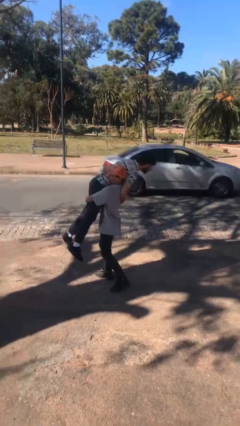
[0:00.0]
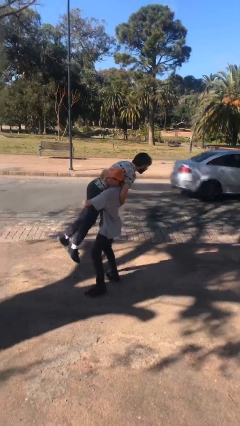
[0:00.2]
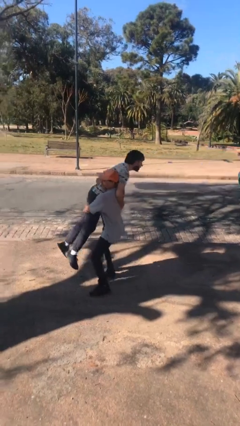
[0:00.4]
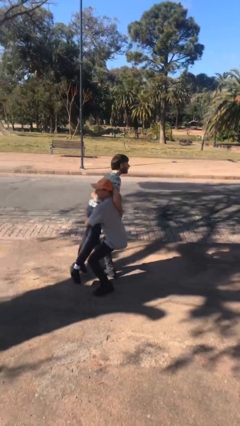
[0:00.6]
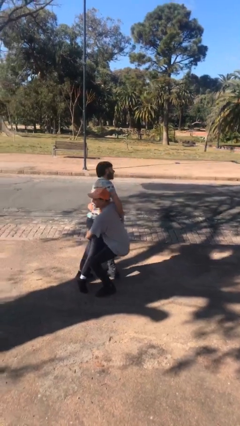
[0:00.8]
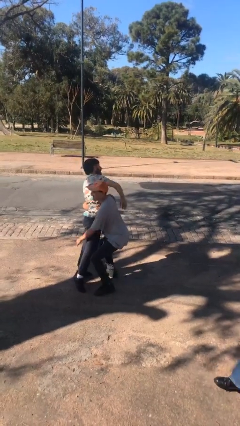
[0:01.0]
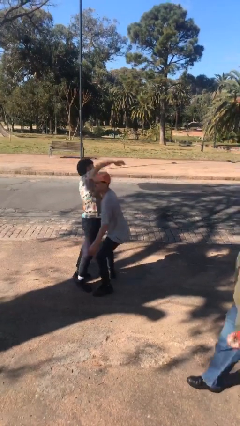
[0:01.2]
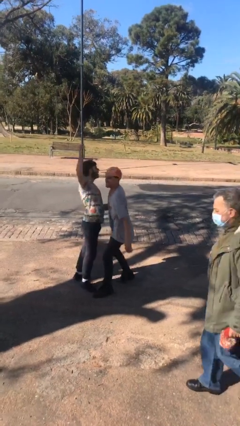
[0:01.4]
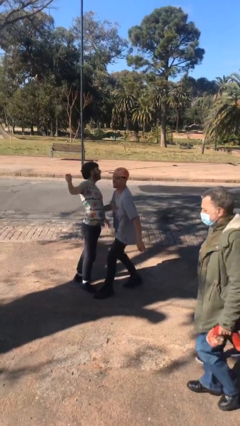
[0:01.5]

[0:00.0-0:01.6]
person puts down person

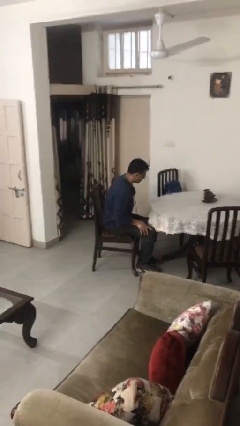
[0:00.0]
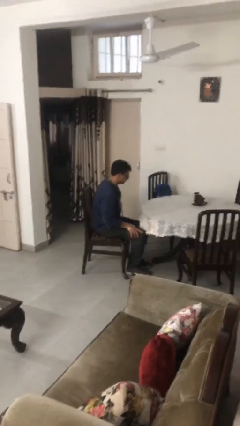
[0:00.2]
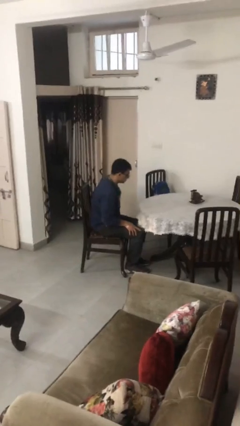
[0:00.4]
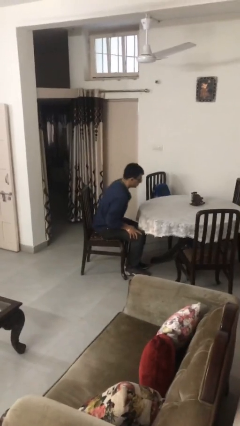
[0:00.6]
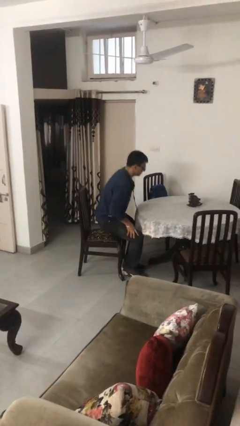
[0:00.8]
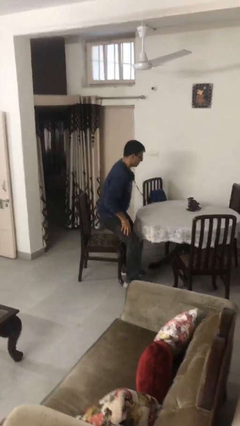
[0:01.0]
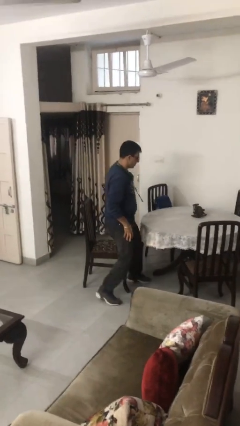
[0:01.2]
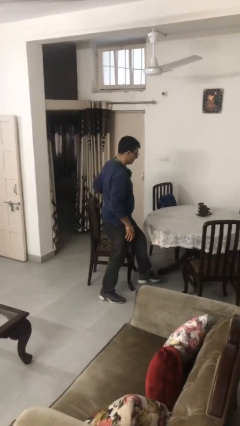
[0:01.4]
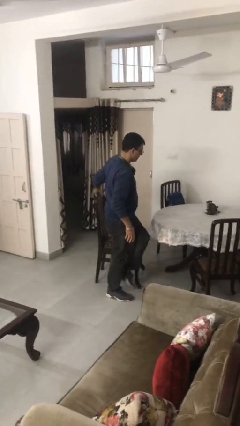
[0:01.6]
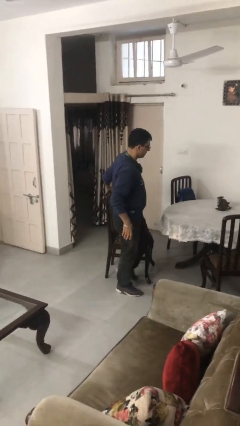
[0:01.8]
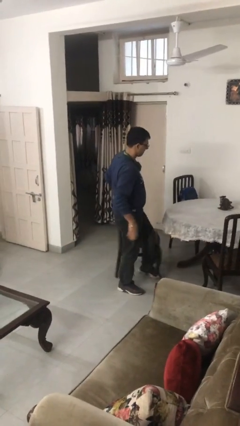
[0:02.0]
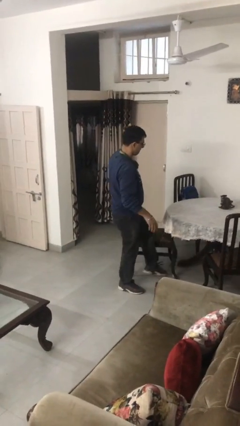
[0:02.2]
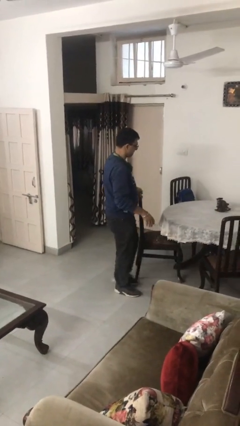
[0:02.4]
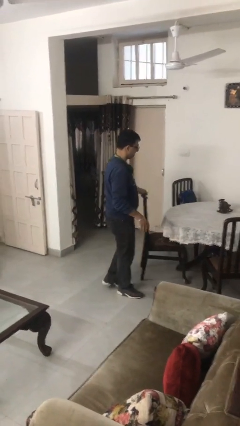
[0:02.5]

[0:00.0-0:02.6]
person stands up

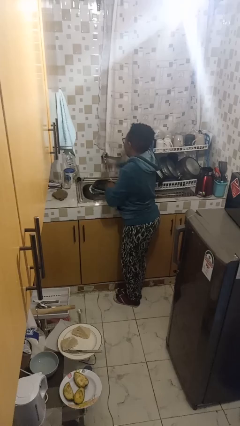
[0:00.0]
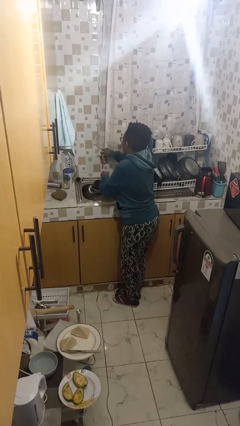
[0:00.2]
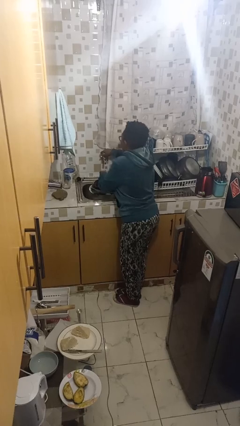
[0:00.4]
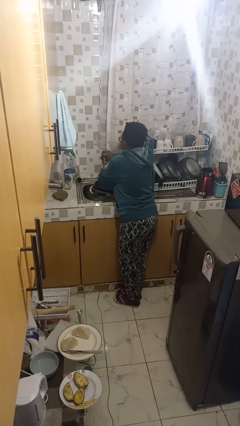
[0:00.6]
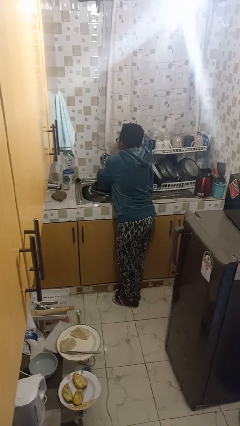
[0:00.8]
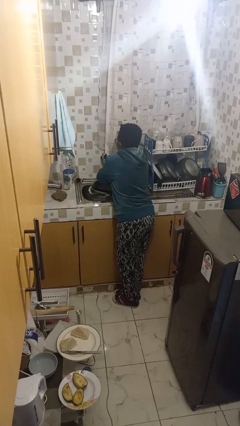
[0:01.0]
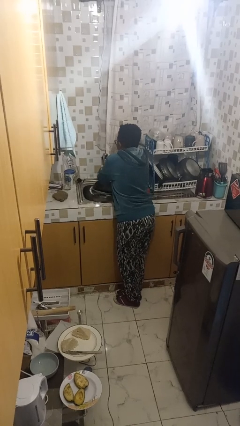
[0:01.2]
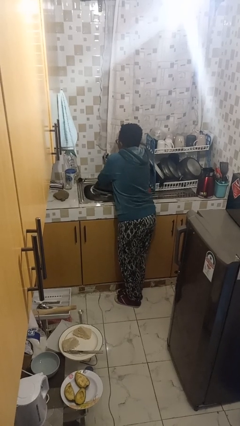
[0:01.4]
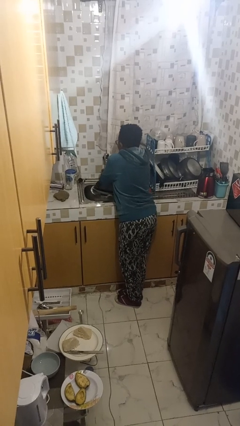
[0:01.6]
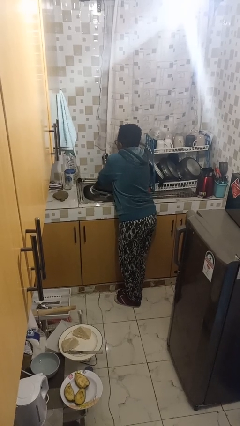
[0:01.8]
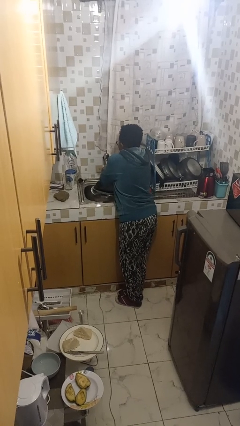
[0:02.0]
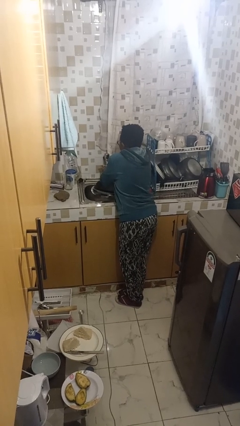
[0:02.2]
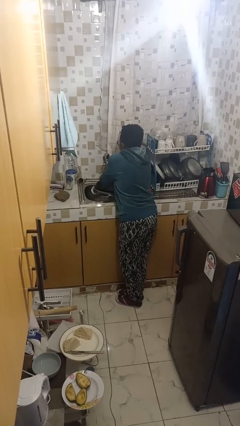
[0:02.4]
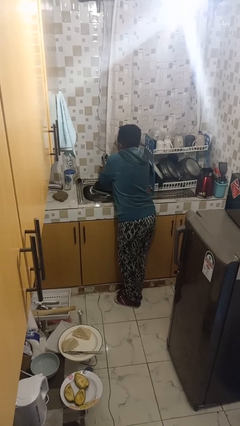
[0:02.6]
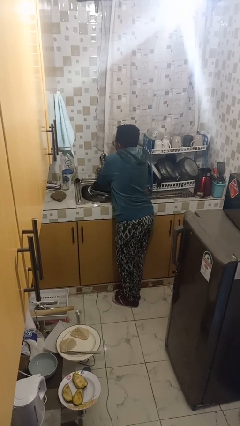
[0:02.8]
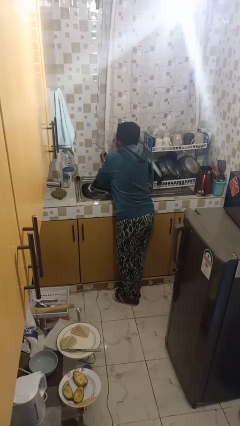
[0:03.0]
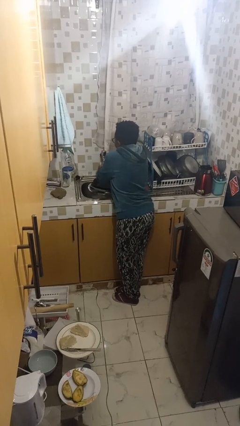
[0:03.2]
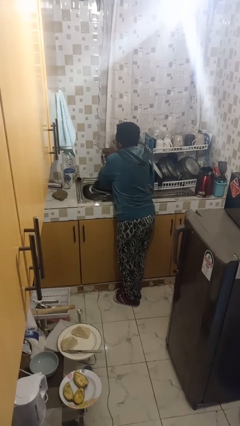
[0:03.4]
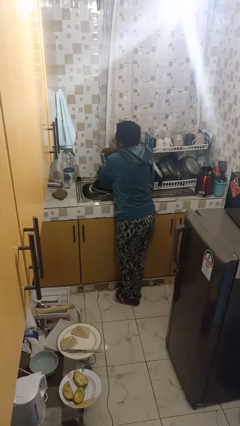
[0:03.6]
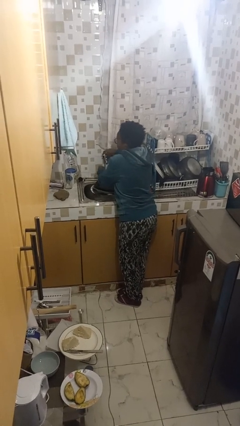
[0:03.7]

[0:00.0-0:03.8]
person washes hands

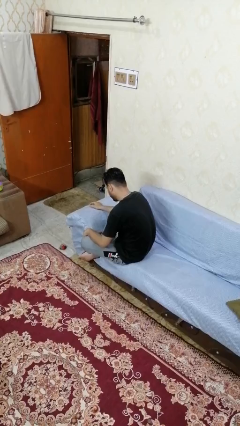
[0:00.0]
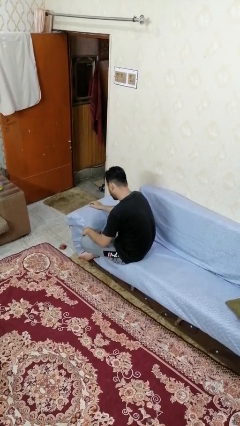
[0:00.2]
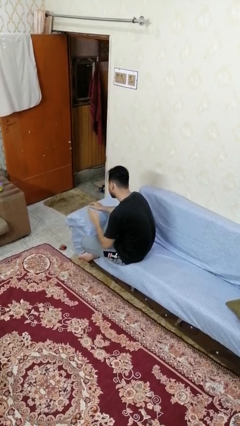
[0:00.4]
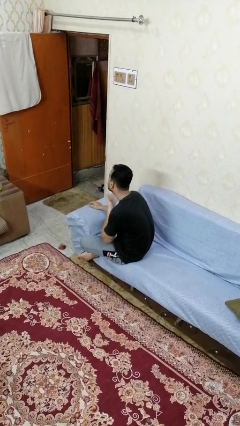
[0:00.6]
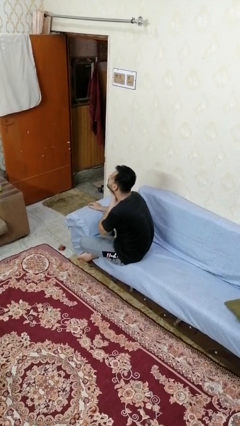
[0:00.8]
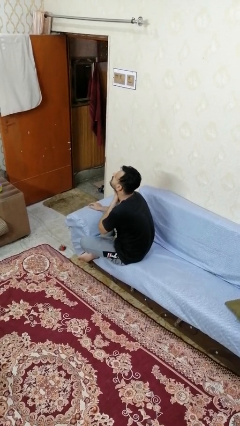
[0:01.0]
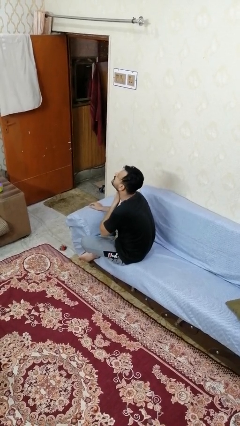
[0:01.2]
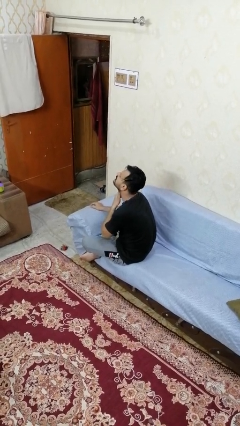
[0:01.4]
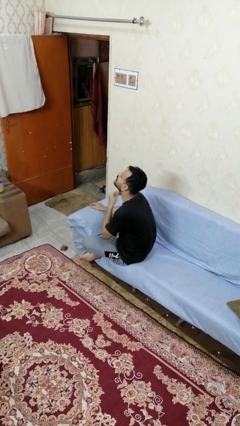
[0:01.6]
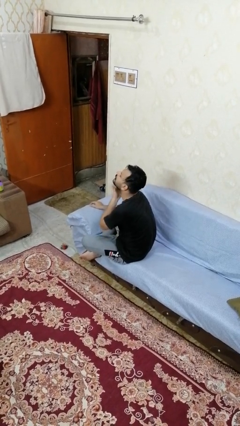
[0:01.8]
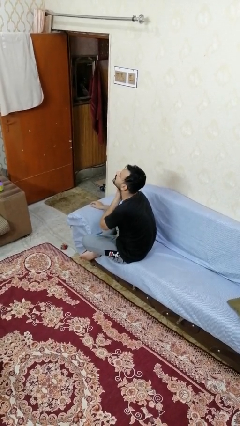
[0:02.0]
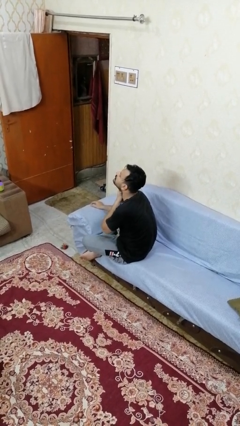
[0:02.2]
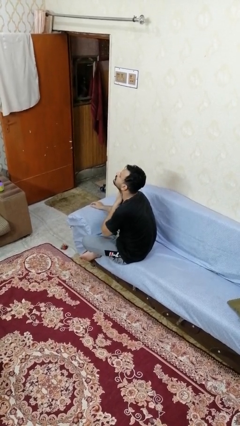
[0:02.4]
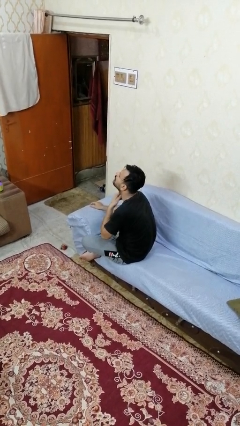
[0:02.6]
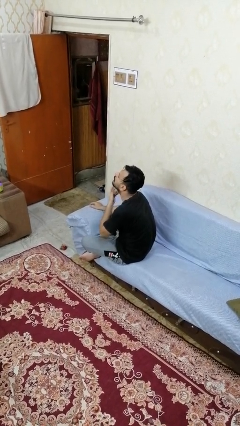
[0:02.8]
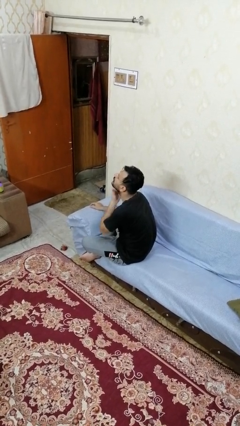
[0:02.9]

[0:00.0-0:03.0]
person rubs neck

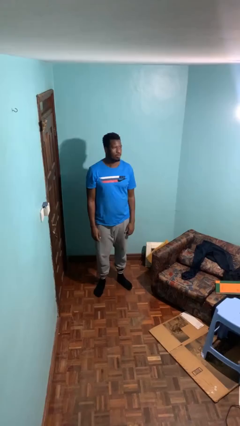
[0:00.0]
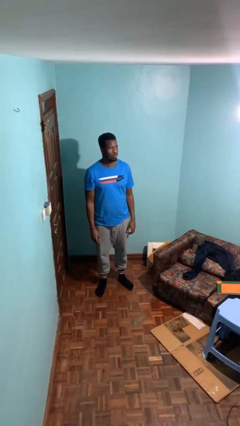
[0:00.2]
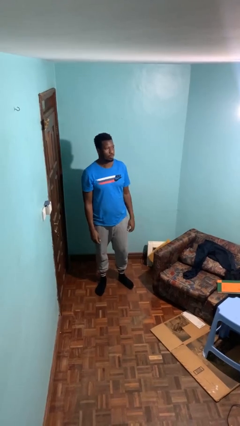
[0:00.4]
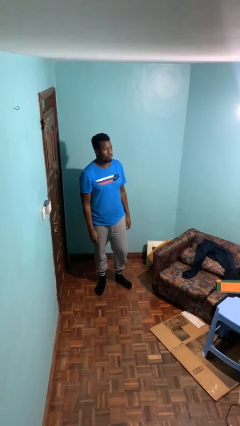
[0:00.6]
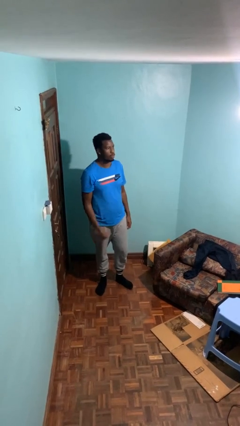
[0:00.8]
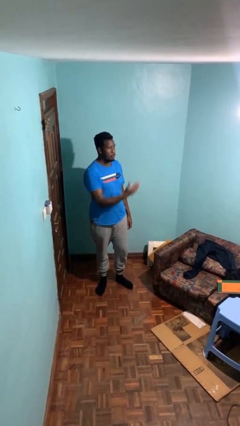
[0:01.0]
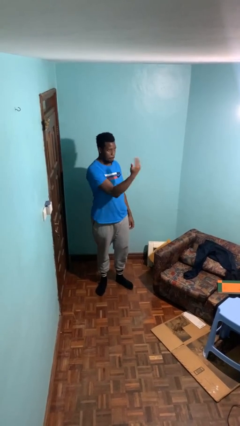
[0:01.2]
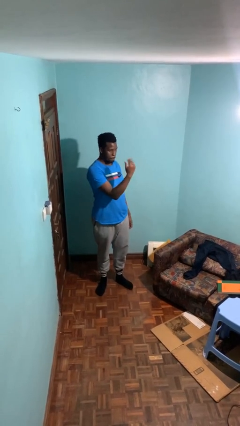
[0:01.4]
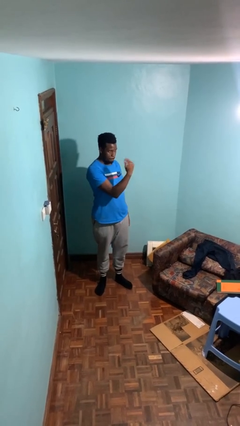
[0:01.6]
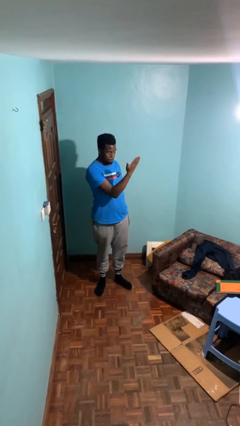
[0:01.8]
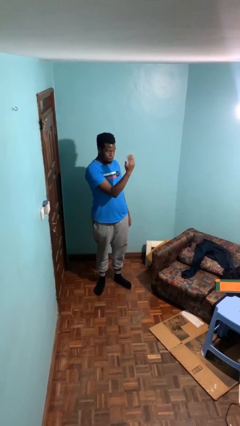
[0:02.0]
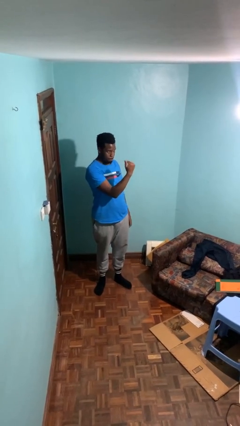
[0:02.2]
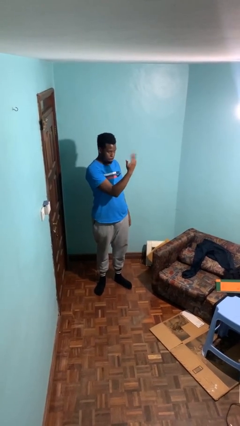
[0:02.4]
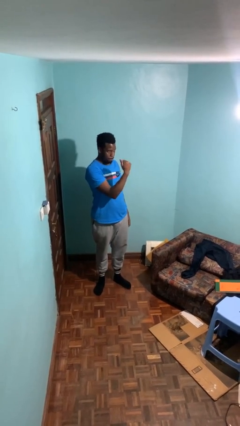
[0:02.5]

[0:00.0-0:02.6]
person gestures come here

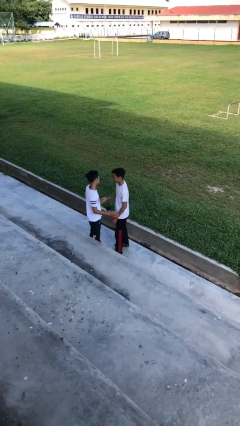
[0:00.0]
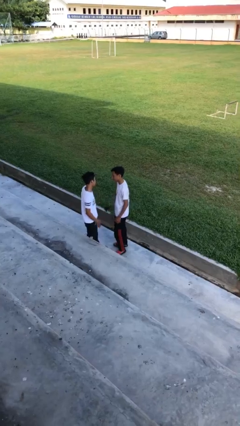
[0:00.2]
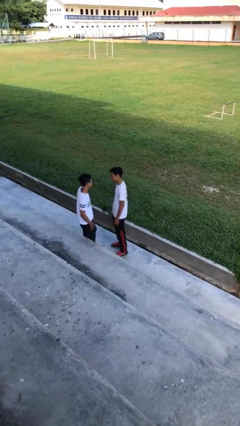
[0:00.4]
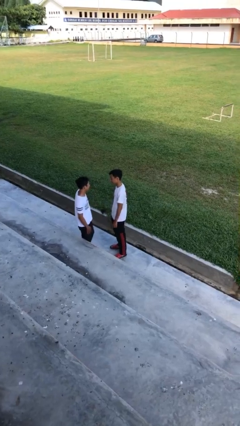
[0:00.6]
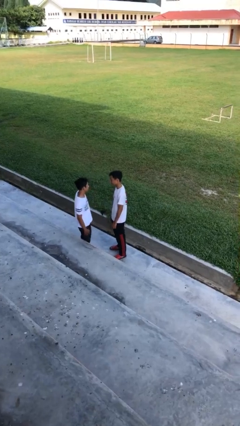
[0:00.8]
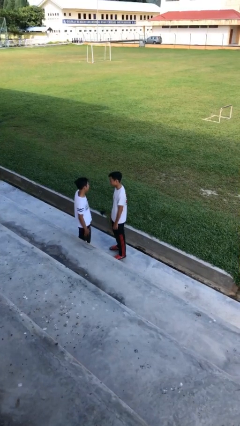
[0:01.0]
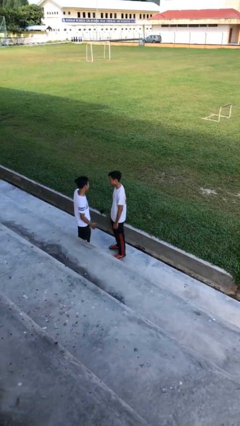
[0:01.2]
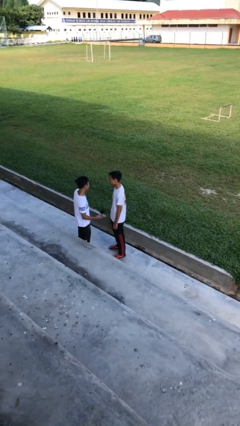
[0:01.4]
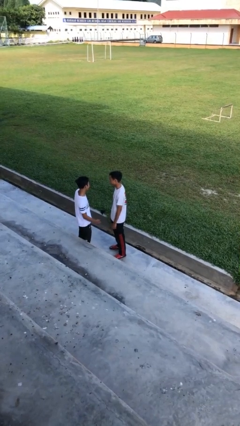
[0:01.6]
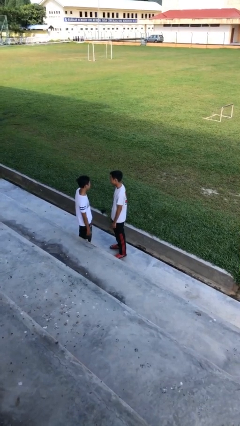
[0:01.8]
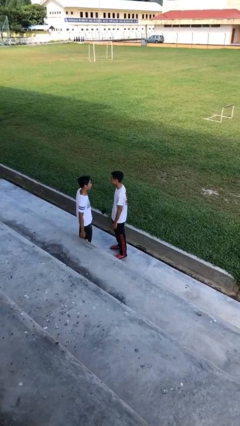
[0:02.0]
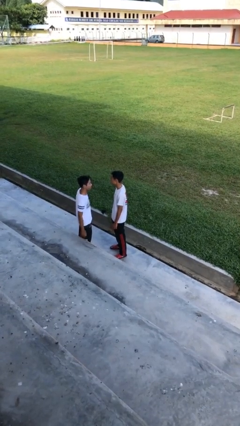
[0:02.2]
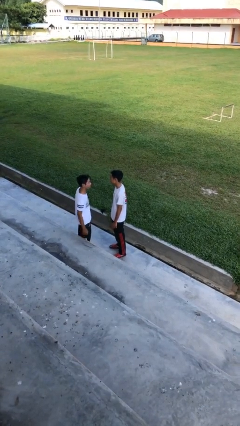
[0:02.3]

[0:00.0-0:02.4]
person talks to person

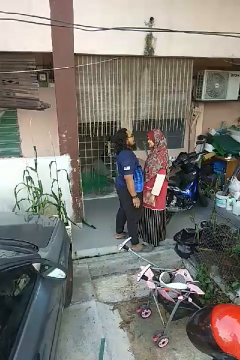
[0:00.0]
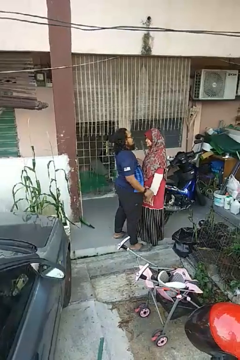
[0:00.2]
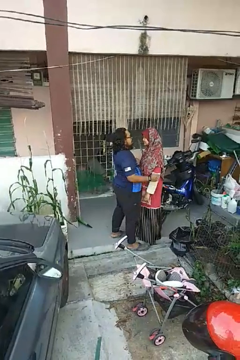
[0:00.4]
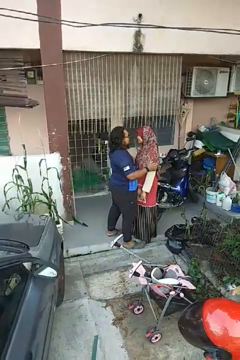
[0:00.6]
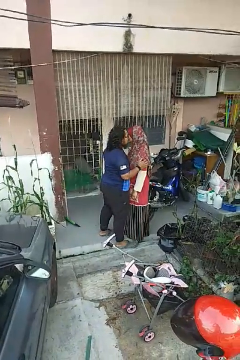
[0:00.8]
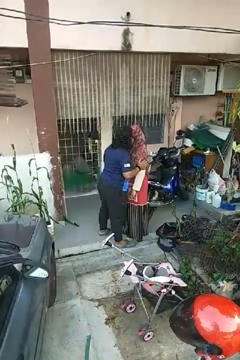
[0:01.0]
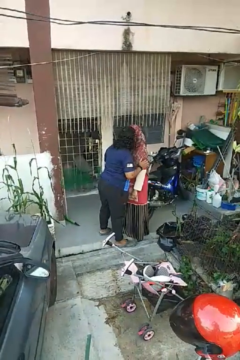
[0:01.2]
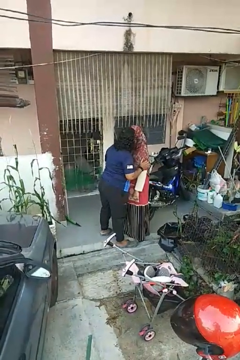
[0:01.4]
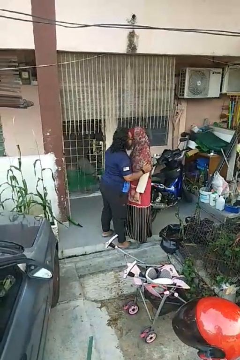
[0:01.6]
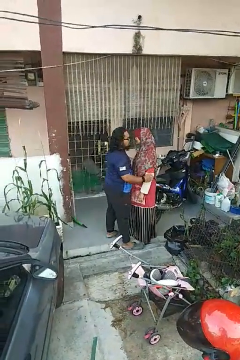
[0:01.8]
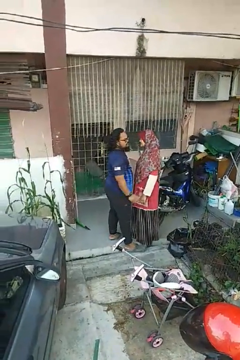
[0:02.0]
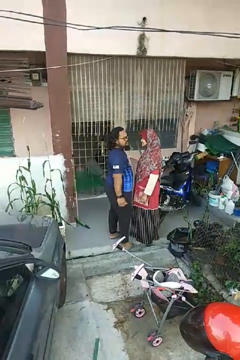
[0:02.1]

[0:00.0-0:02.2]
person kisses cheek of person
